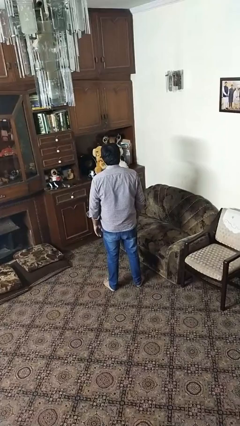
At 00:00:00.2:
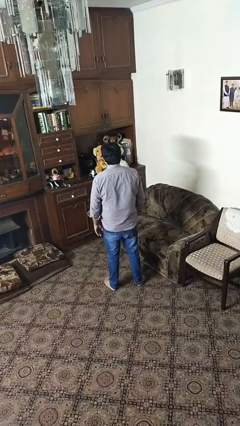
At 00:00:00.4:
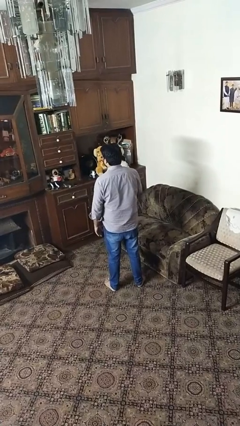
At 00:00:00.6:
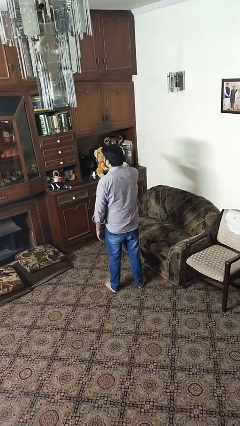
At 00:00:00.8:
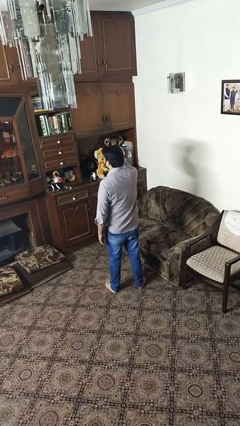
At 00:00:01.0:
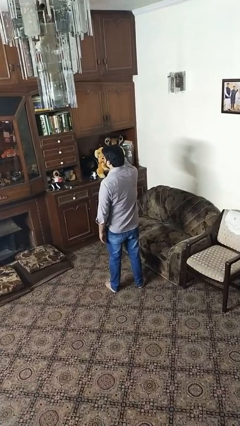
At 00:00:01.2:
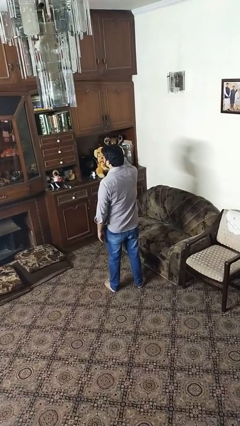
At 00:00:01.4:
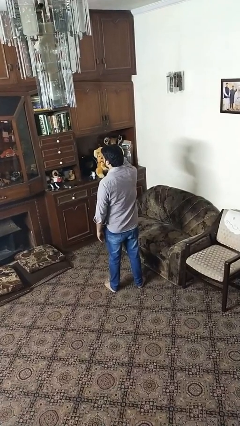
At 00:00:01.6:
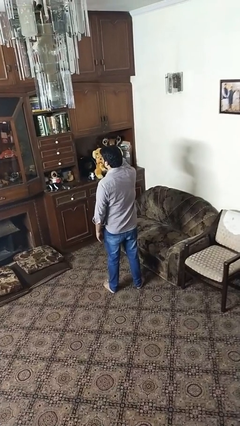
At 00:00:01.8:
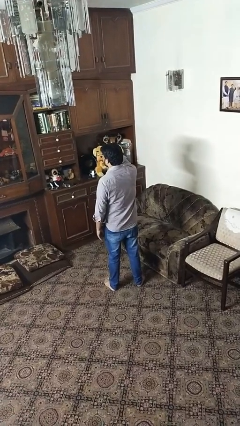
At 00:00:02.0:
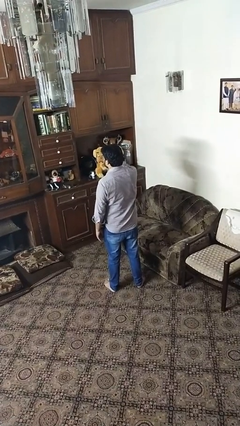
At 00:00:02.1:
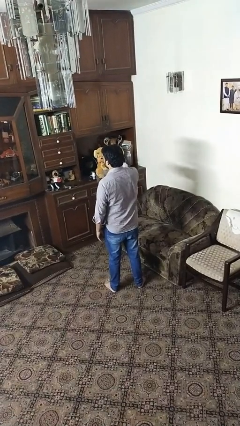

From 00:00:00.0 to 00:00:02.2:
person salutes

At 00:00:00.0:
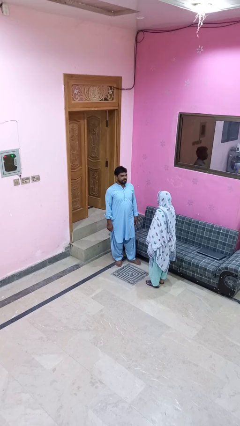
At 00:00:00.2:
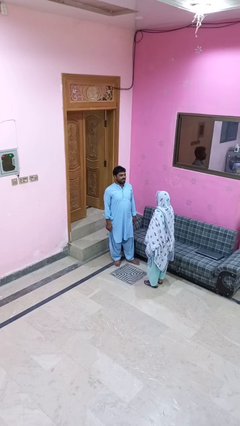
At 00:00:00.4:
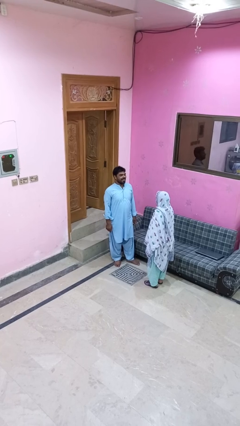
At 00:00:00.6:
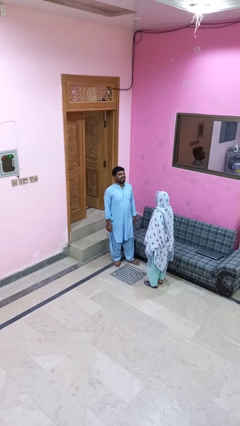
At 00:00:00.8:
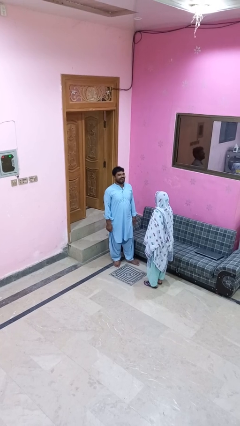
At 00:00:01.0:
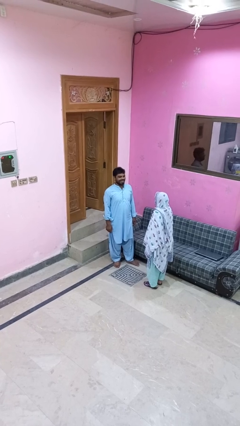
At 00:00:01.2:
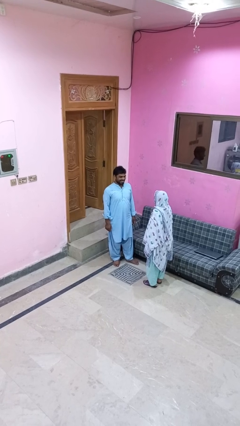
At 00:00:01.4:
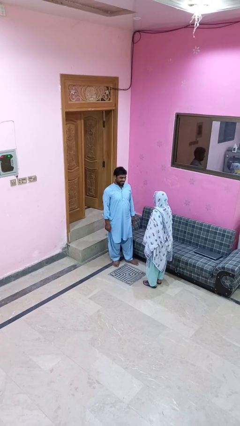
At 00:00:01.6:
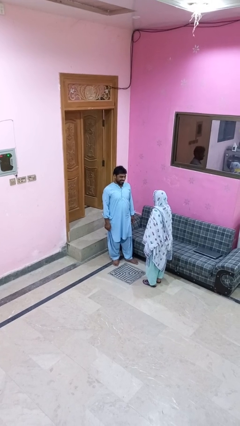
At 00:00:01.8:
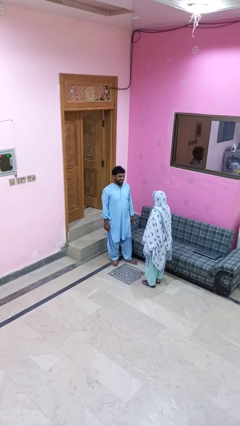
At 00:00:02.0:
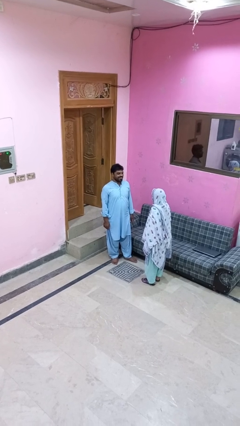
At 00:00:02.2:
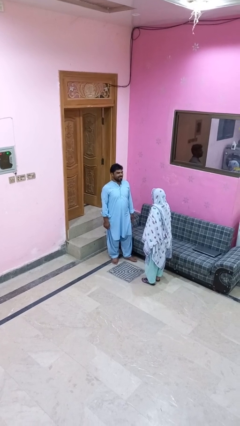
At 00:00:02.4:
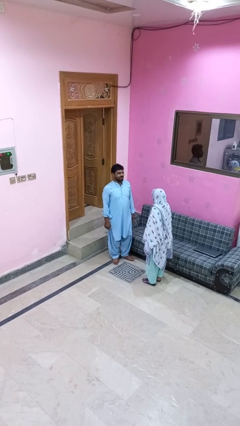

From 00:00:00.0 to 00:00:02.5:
person laughs with person

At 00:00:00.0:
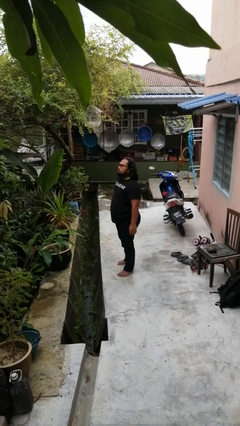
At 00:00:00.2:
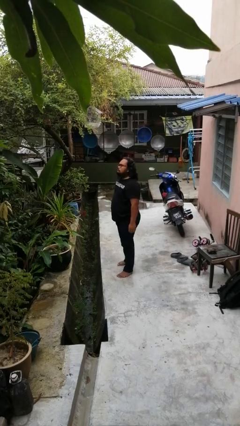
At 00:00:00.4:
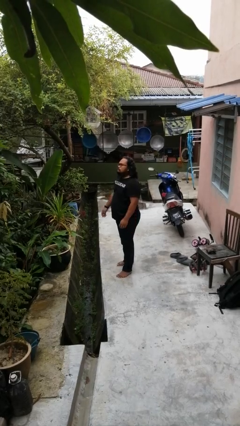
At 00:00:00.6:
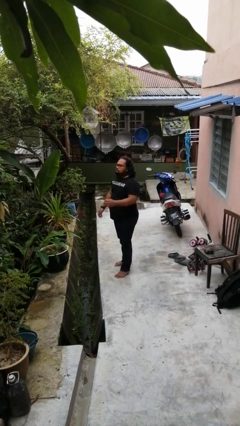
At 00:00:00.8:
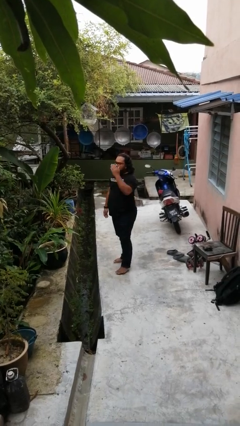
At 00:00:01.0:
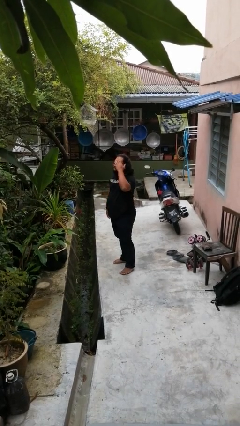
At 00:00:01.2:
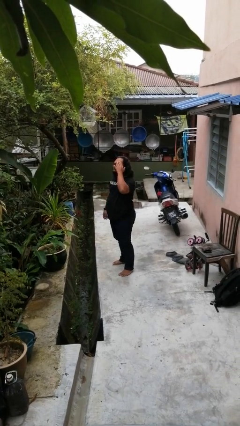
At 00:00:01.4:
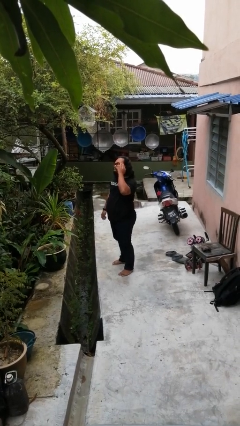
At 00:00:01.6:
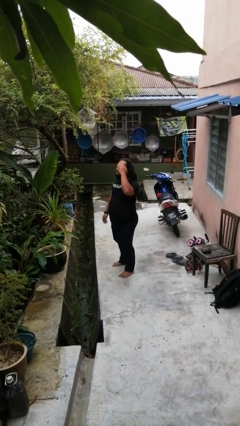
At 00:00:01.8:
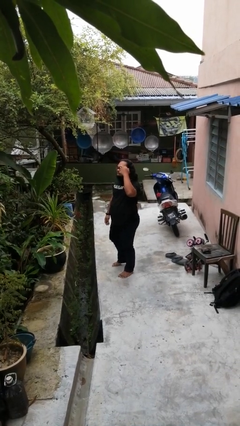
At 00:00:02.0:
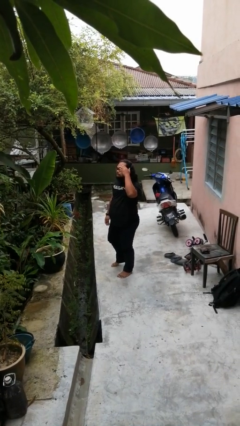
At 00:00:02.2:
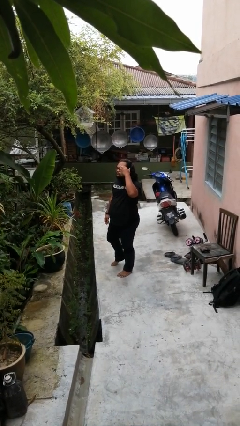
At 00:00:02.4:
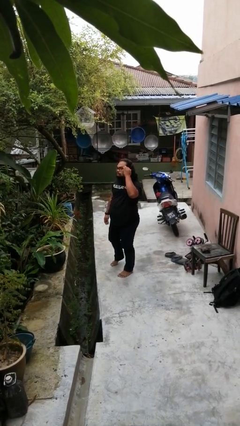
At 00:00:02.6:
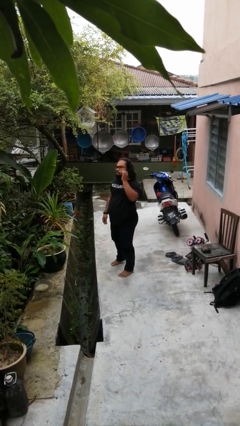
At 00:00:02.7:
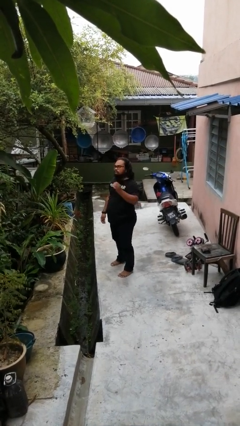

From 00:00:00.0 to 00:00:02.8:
person scratches face

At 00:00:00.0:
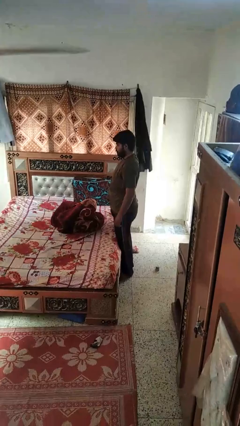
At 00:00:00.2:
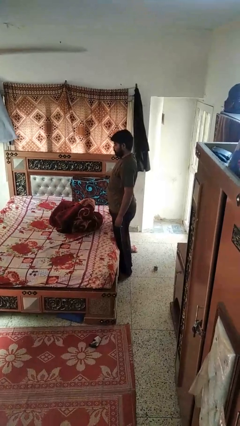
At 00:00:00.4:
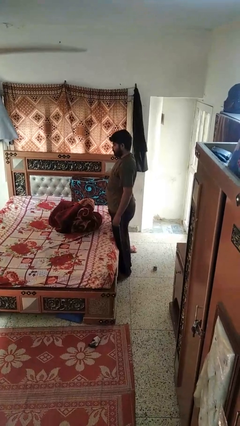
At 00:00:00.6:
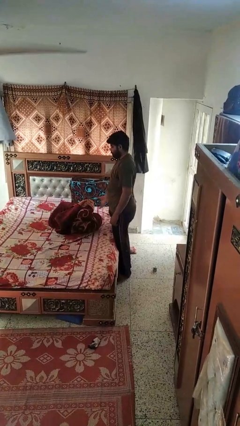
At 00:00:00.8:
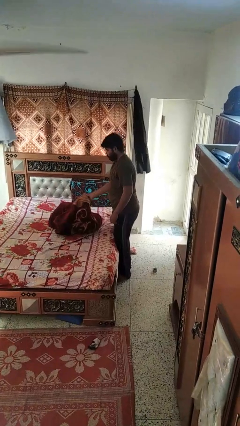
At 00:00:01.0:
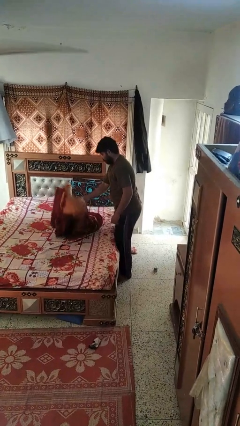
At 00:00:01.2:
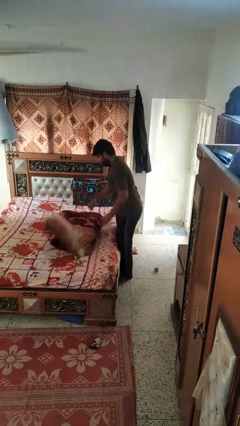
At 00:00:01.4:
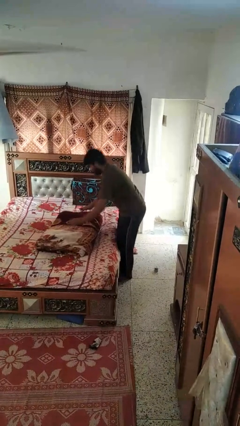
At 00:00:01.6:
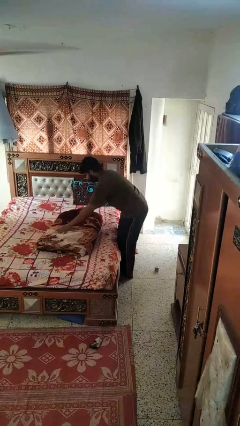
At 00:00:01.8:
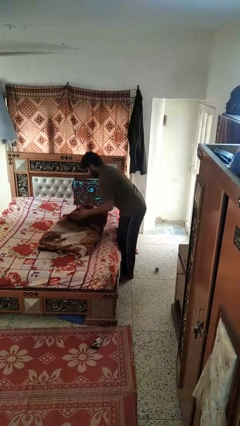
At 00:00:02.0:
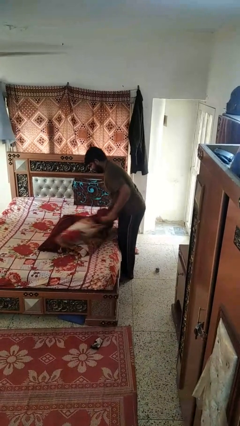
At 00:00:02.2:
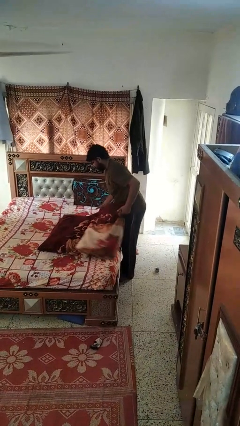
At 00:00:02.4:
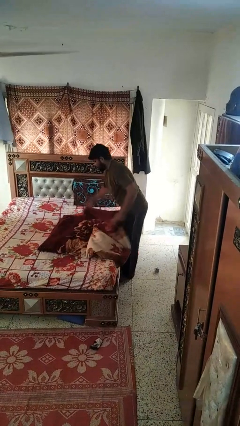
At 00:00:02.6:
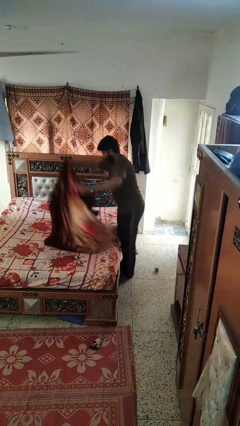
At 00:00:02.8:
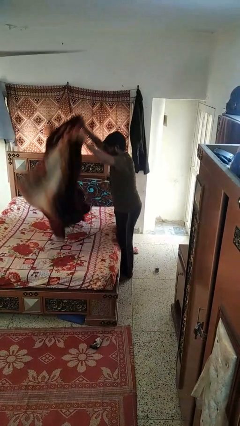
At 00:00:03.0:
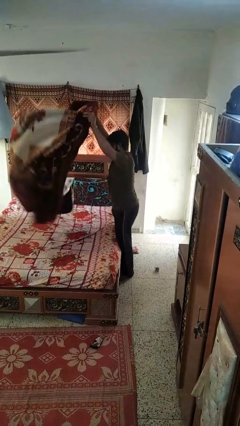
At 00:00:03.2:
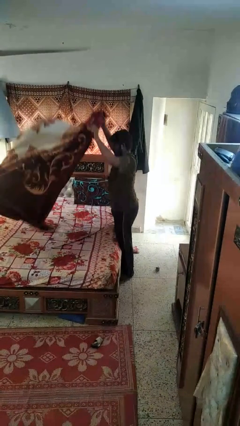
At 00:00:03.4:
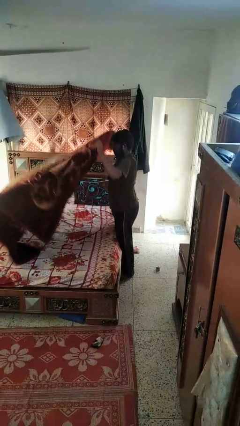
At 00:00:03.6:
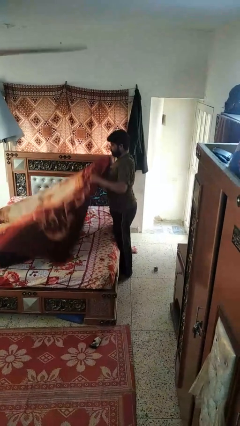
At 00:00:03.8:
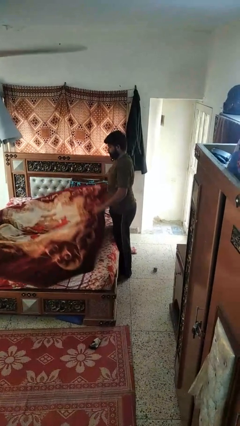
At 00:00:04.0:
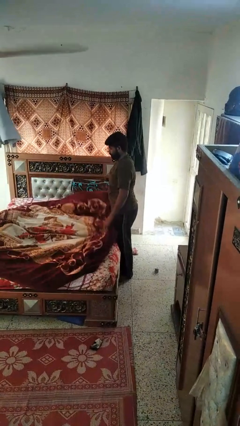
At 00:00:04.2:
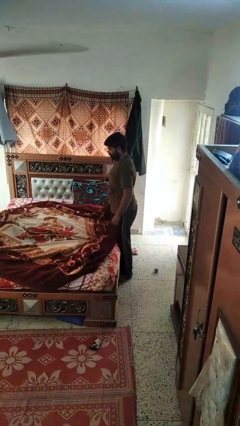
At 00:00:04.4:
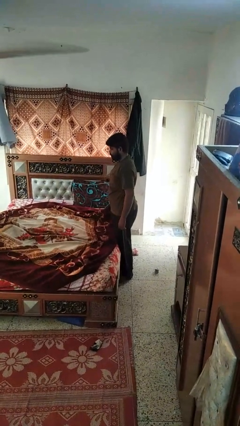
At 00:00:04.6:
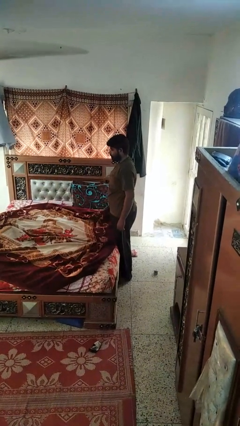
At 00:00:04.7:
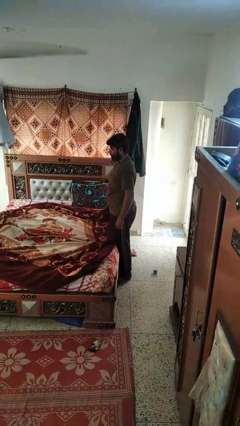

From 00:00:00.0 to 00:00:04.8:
person unfolds blanket

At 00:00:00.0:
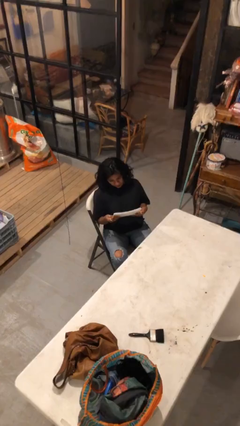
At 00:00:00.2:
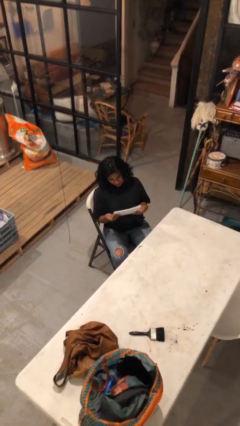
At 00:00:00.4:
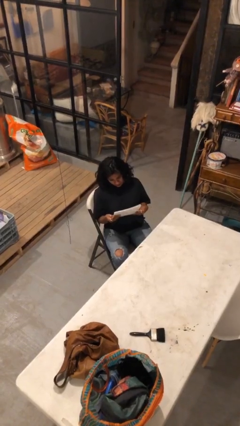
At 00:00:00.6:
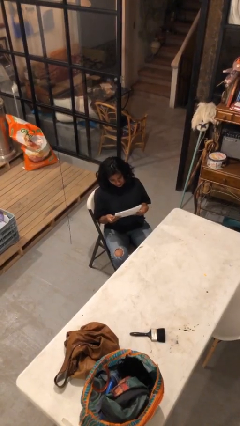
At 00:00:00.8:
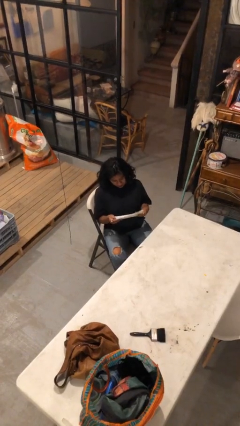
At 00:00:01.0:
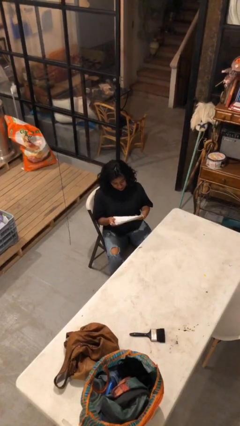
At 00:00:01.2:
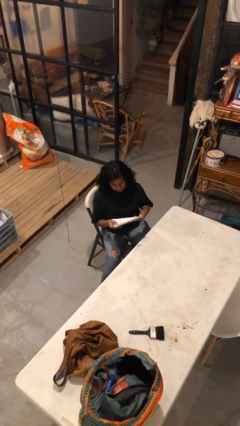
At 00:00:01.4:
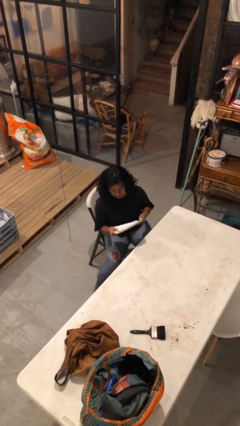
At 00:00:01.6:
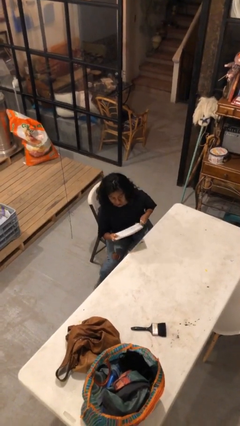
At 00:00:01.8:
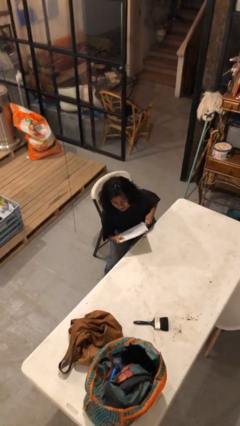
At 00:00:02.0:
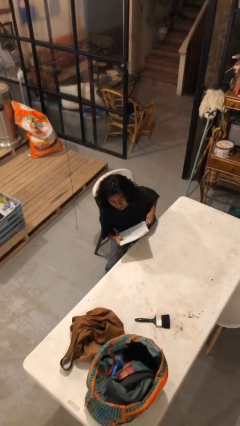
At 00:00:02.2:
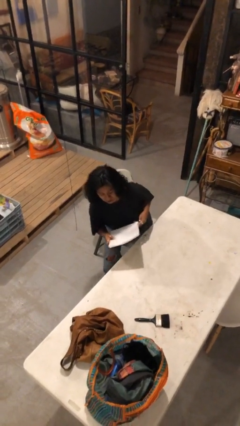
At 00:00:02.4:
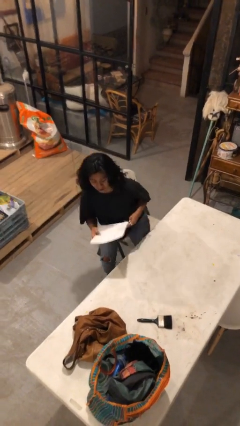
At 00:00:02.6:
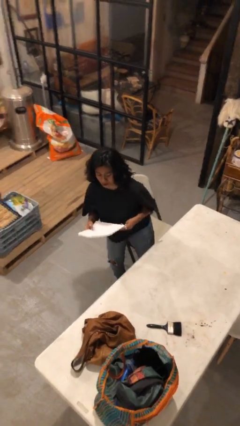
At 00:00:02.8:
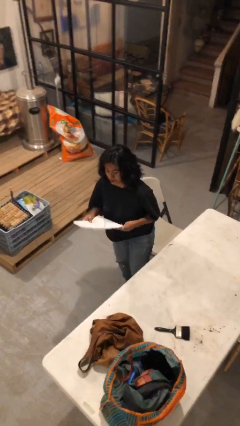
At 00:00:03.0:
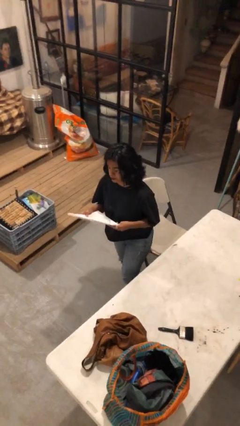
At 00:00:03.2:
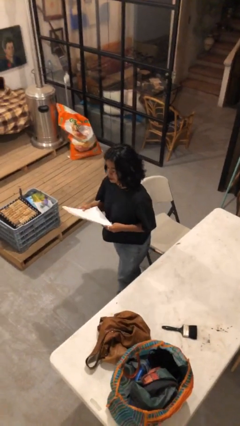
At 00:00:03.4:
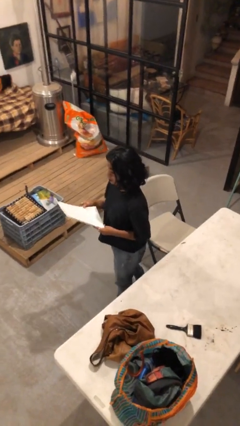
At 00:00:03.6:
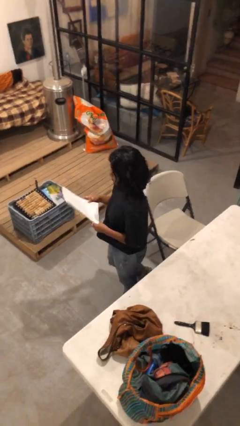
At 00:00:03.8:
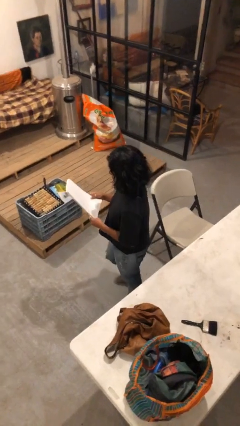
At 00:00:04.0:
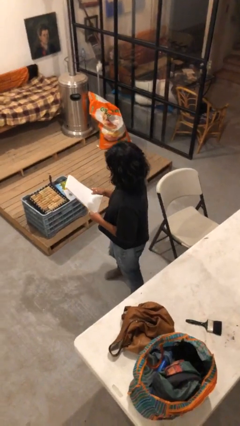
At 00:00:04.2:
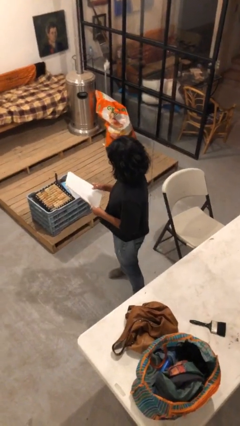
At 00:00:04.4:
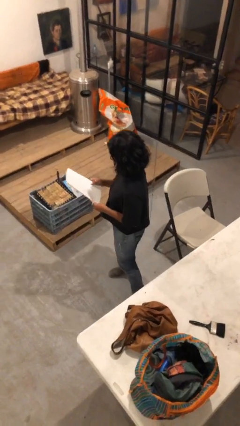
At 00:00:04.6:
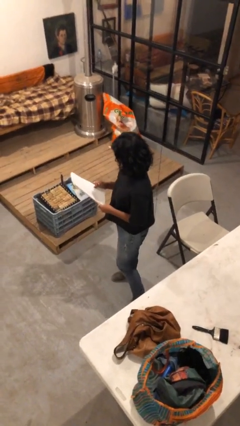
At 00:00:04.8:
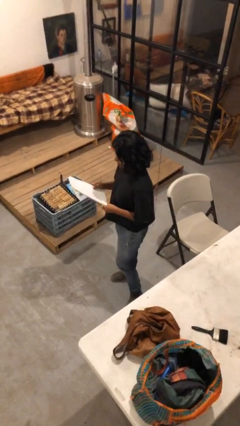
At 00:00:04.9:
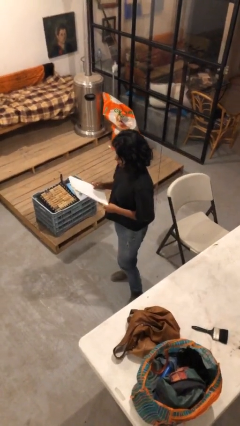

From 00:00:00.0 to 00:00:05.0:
person stands up

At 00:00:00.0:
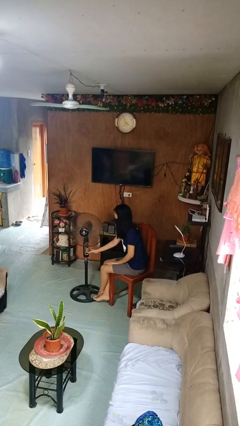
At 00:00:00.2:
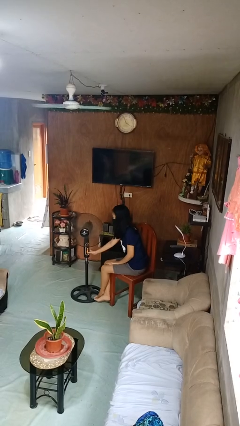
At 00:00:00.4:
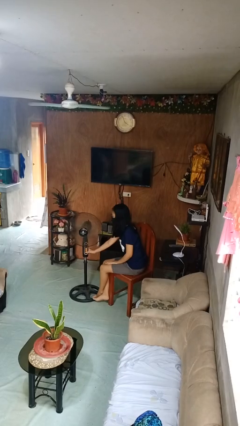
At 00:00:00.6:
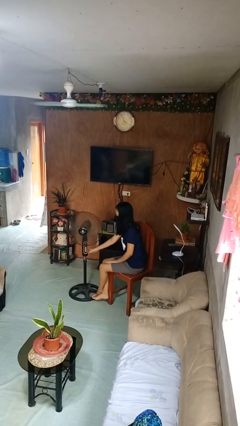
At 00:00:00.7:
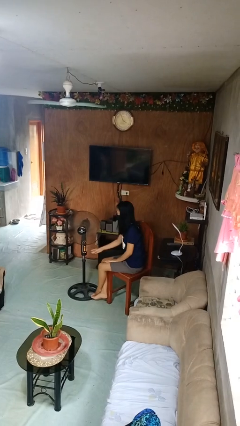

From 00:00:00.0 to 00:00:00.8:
person turns off fan
